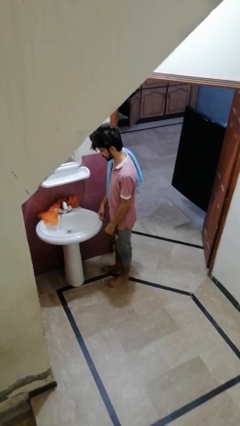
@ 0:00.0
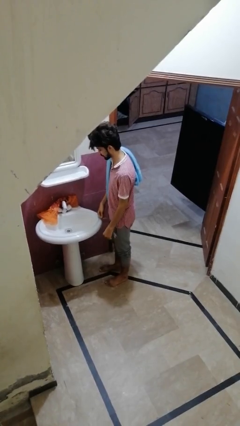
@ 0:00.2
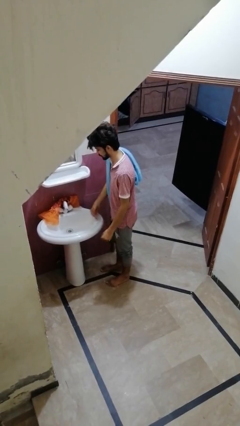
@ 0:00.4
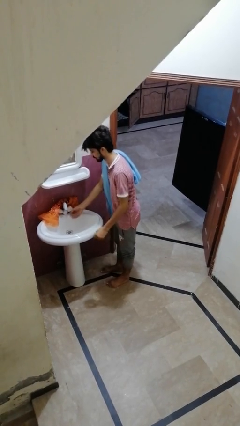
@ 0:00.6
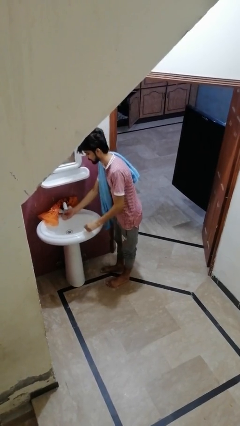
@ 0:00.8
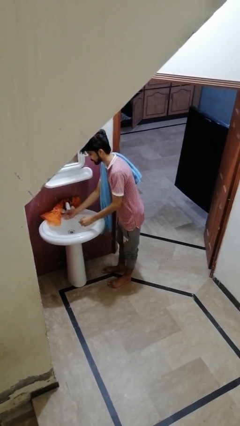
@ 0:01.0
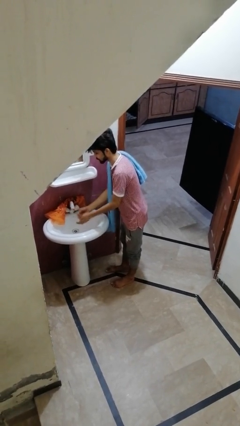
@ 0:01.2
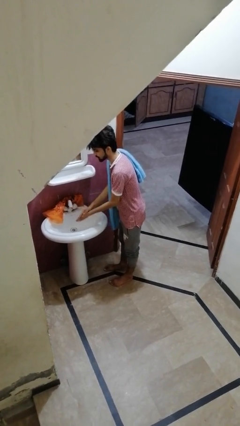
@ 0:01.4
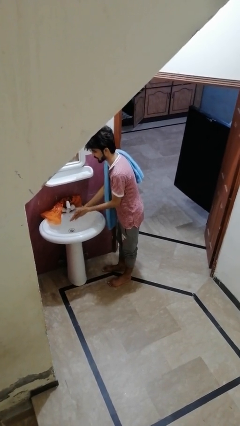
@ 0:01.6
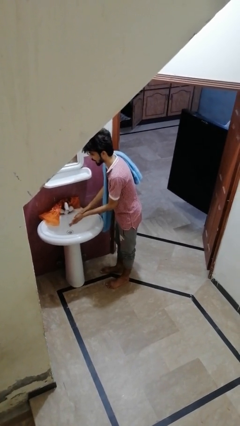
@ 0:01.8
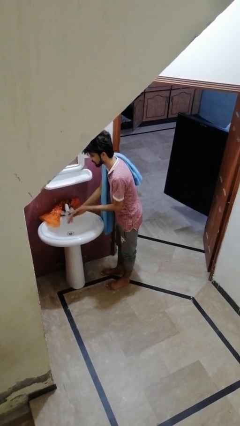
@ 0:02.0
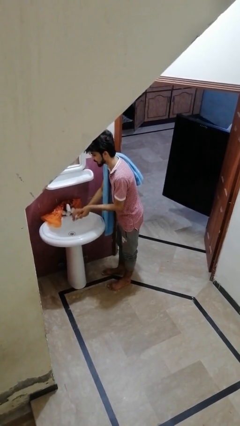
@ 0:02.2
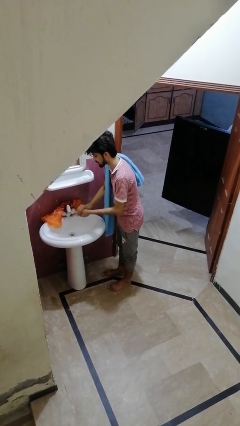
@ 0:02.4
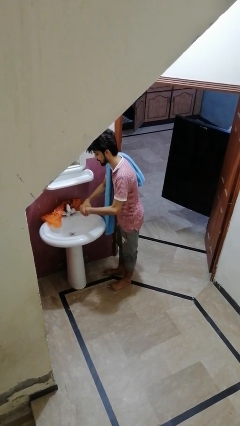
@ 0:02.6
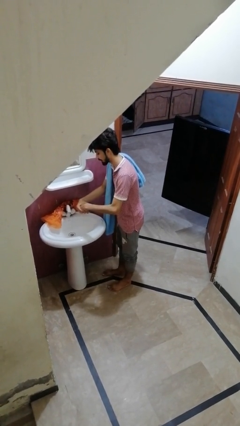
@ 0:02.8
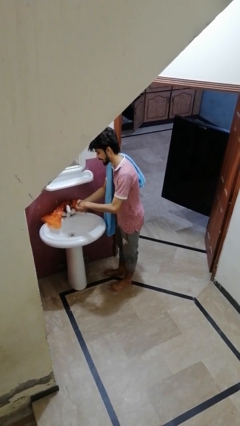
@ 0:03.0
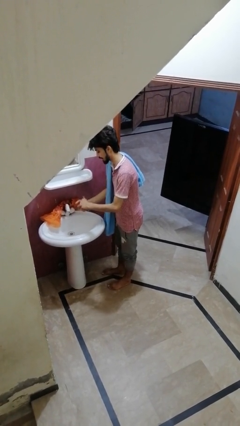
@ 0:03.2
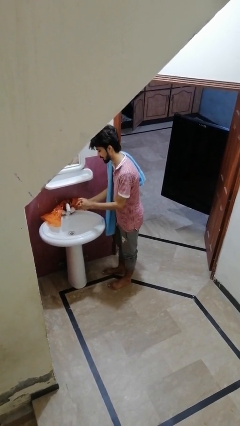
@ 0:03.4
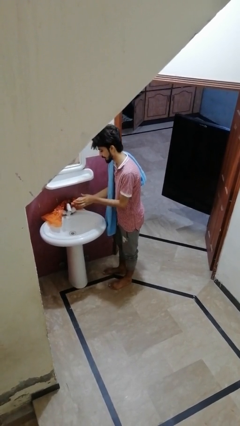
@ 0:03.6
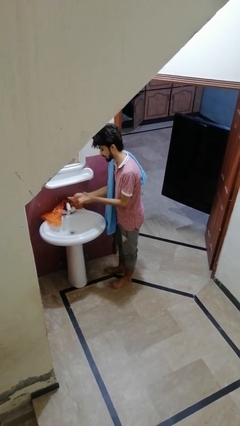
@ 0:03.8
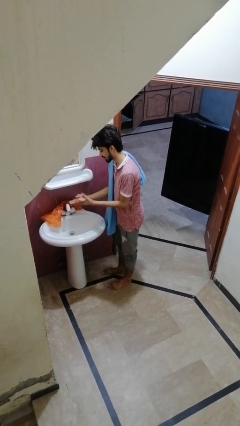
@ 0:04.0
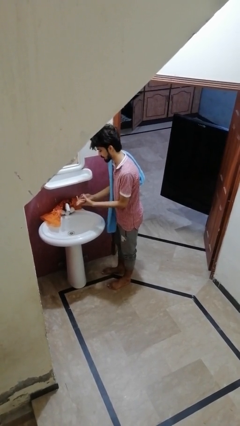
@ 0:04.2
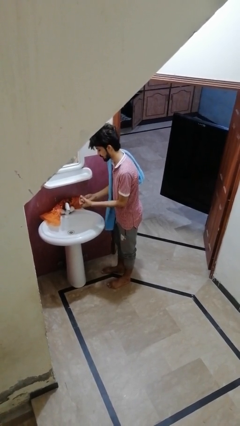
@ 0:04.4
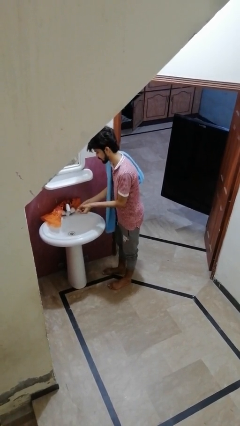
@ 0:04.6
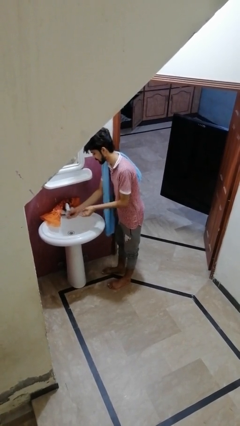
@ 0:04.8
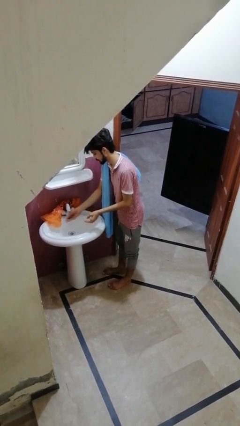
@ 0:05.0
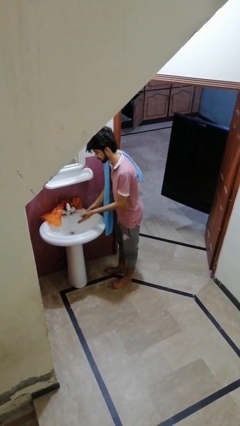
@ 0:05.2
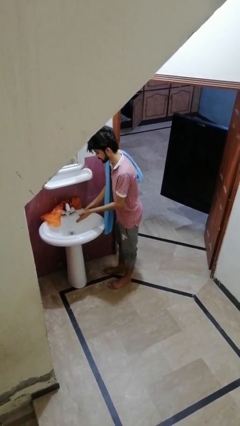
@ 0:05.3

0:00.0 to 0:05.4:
person washes hands

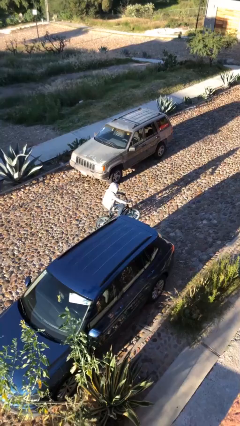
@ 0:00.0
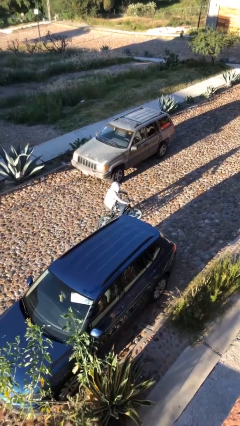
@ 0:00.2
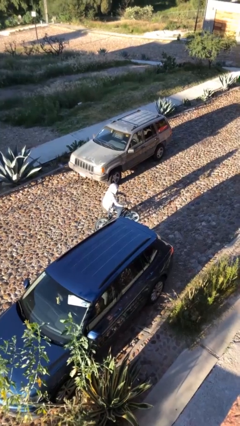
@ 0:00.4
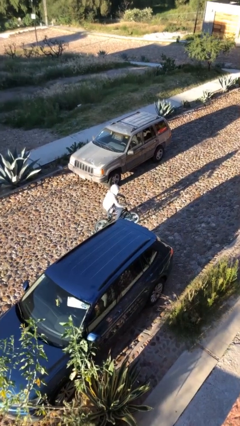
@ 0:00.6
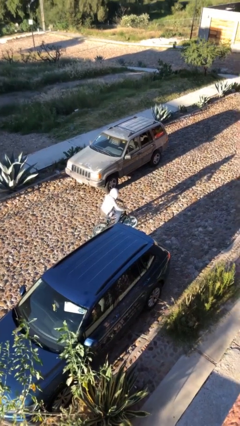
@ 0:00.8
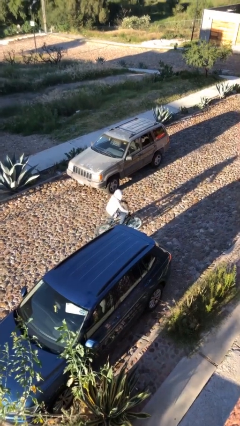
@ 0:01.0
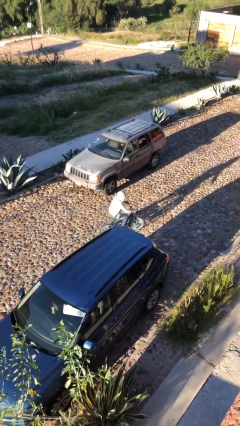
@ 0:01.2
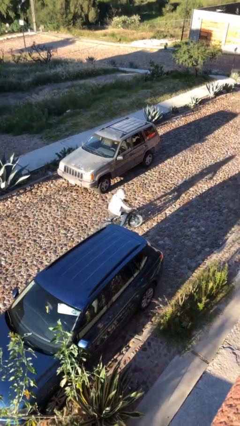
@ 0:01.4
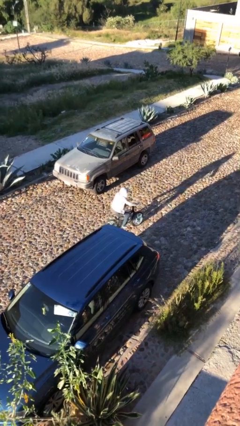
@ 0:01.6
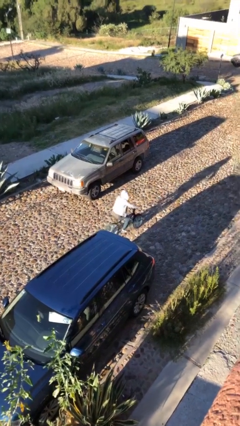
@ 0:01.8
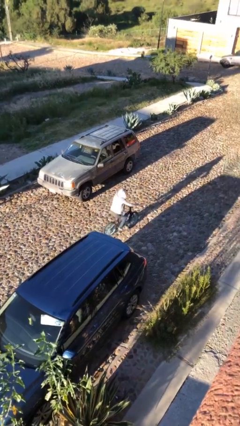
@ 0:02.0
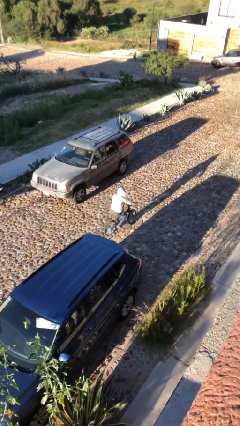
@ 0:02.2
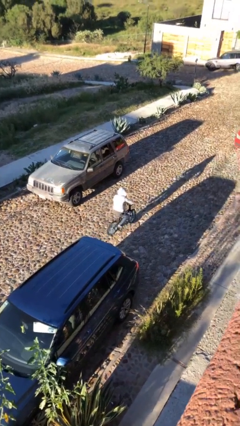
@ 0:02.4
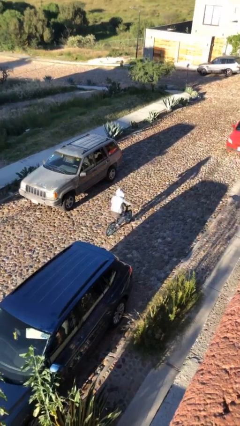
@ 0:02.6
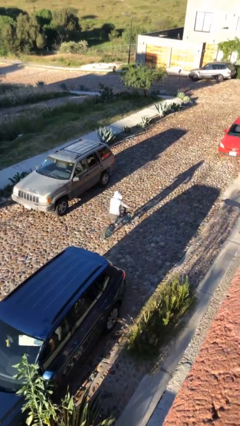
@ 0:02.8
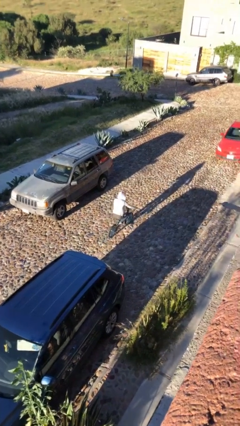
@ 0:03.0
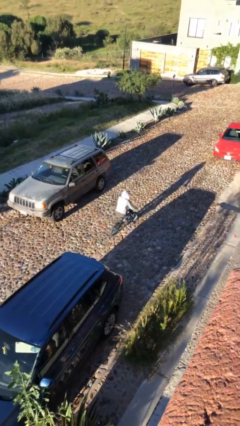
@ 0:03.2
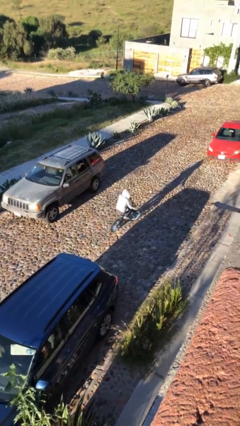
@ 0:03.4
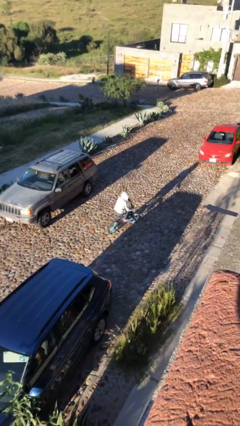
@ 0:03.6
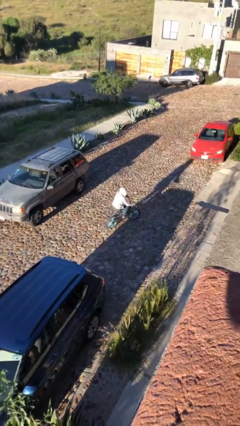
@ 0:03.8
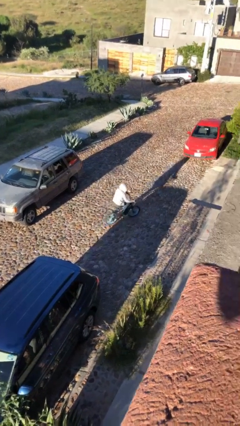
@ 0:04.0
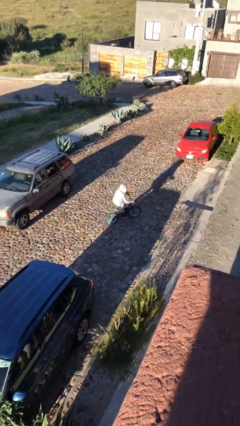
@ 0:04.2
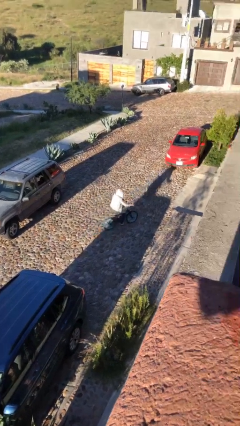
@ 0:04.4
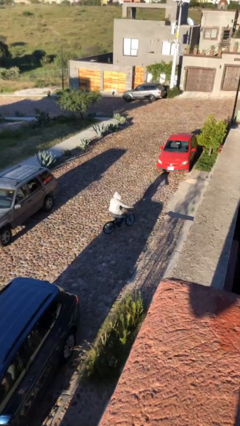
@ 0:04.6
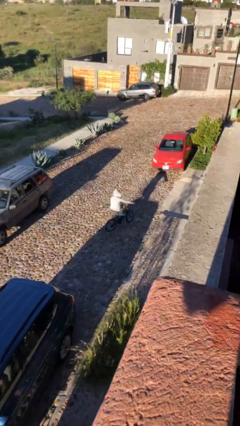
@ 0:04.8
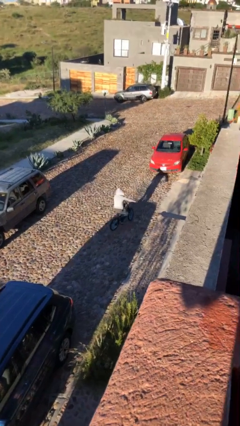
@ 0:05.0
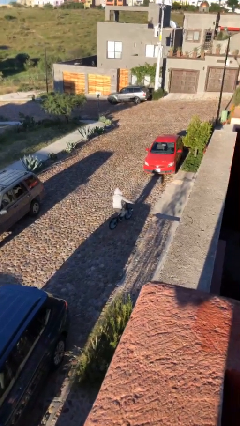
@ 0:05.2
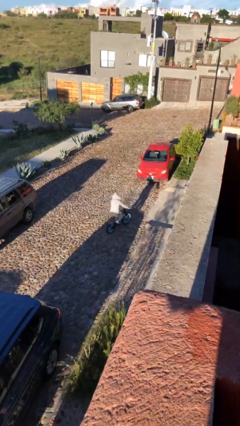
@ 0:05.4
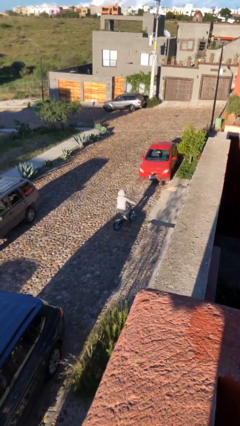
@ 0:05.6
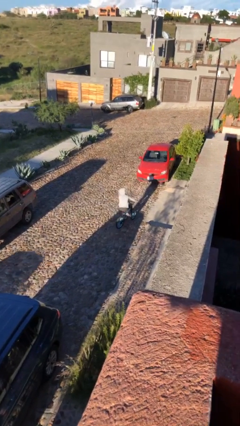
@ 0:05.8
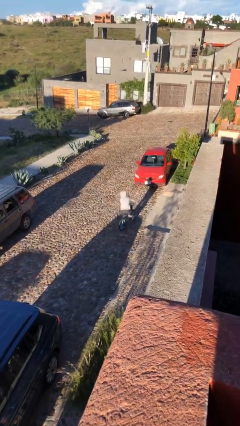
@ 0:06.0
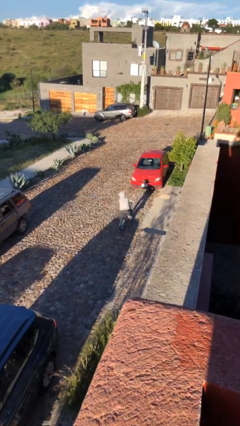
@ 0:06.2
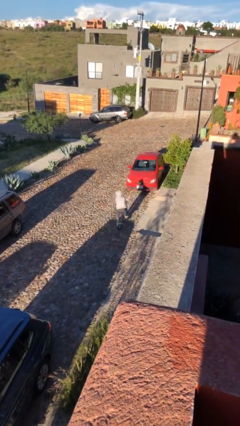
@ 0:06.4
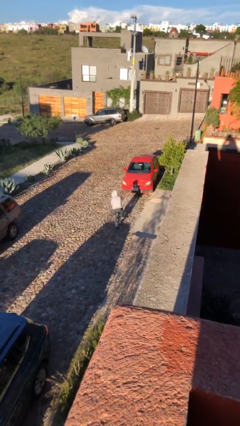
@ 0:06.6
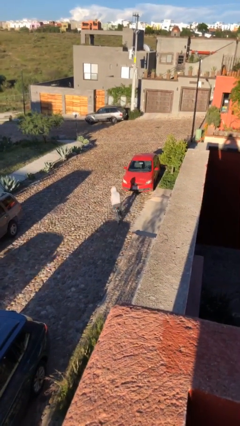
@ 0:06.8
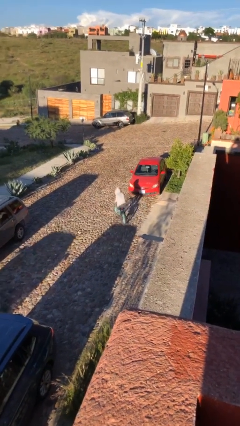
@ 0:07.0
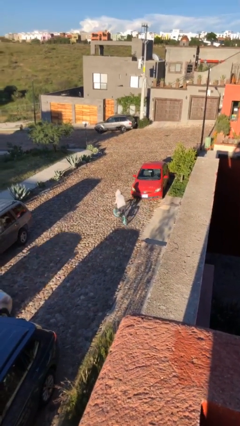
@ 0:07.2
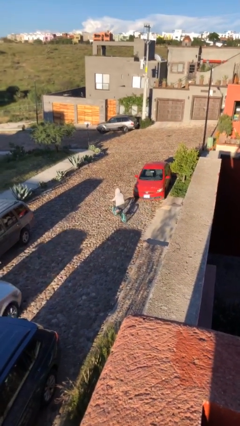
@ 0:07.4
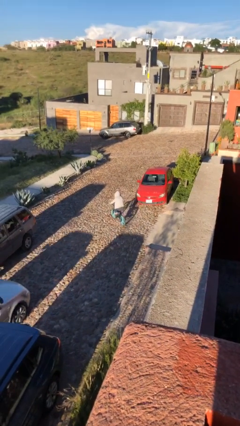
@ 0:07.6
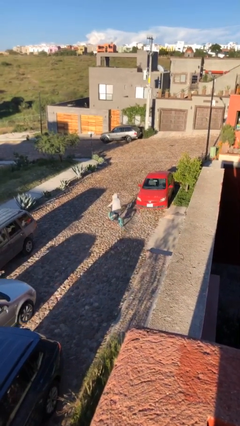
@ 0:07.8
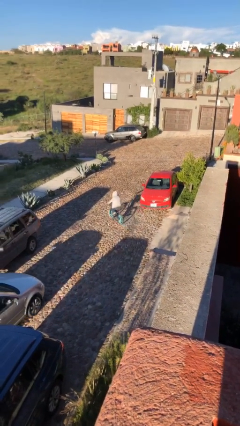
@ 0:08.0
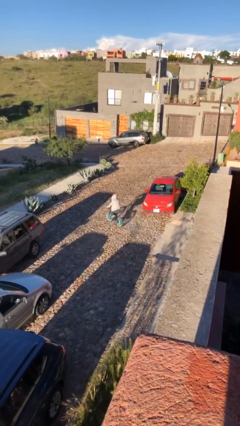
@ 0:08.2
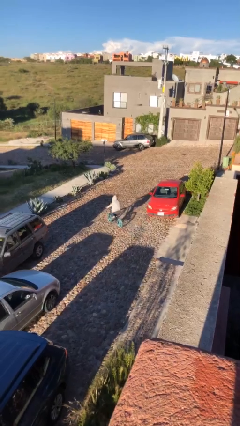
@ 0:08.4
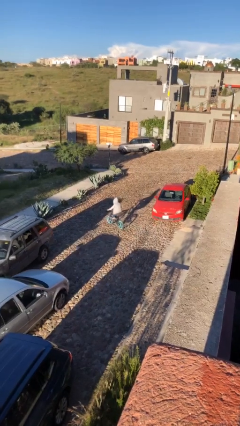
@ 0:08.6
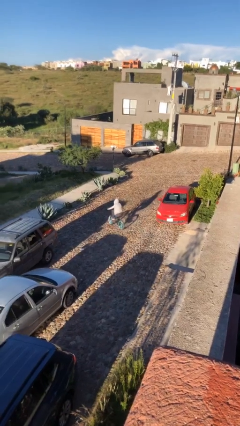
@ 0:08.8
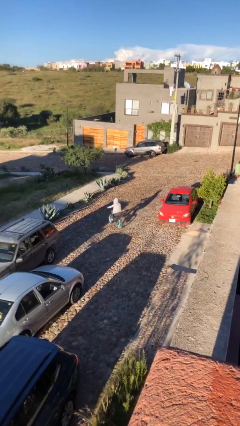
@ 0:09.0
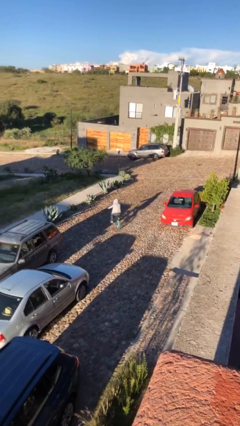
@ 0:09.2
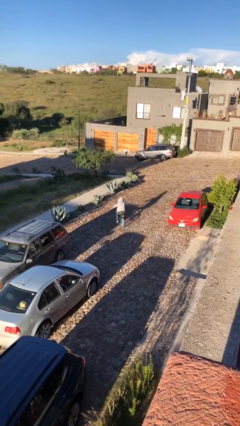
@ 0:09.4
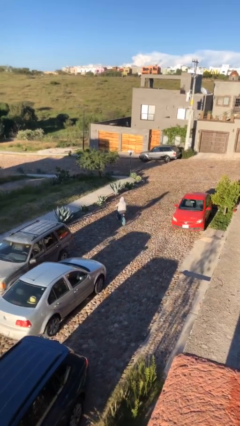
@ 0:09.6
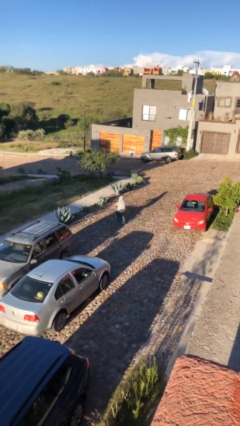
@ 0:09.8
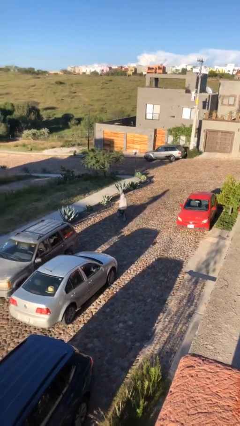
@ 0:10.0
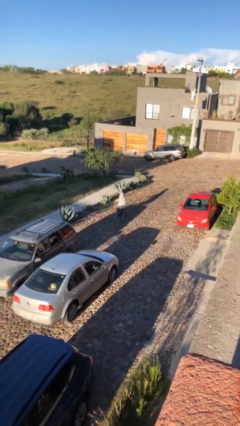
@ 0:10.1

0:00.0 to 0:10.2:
person rides bicycle

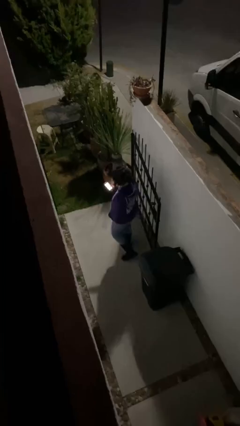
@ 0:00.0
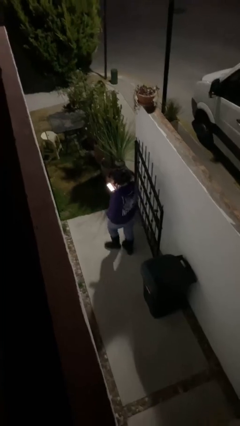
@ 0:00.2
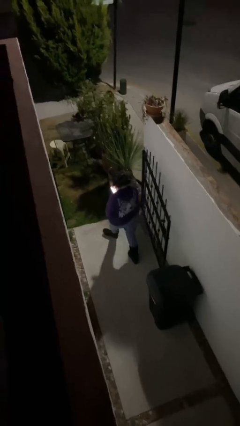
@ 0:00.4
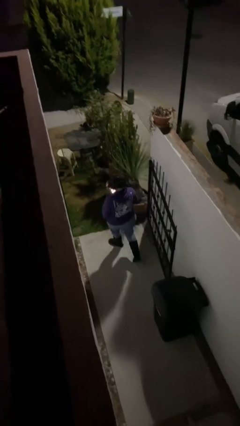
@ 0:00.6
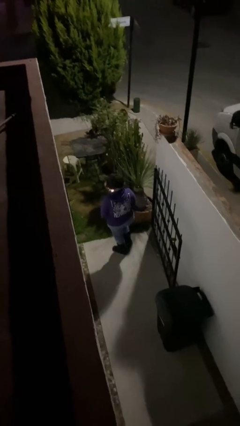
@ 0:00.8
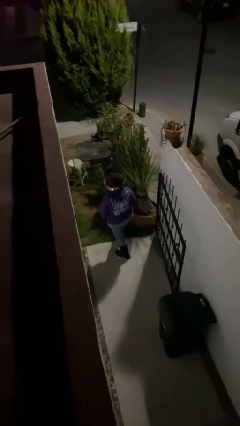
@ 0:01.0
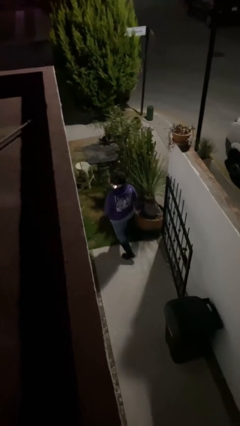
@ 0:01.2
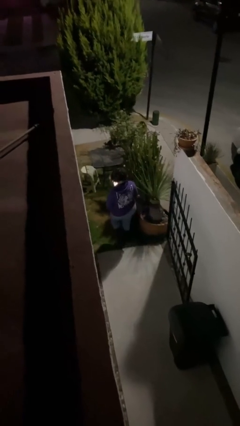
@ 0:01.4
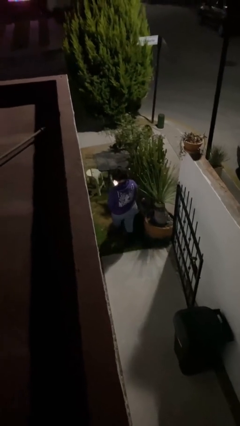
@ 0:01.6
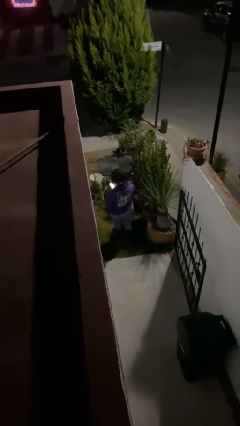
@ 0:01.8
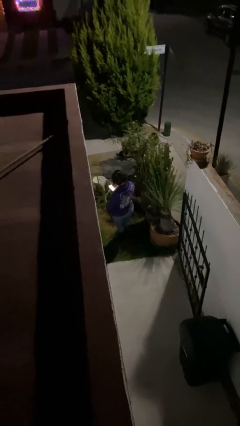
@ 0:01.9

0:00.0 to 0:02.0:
person exits scene through structure
